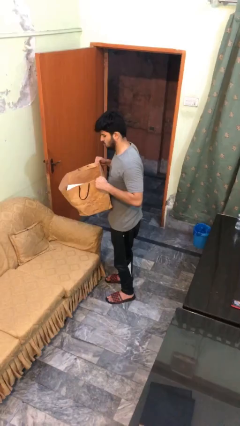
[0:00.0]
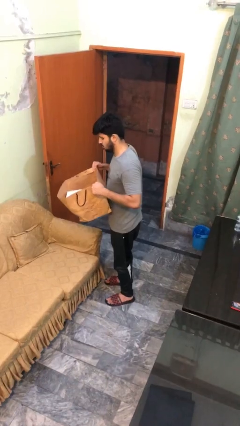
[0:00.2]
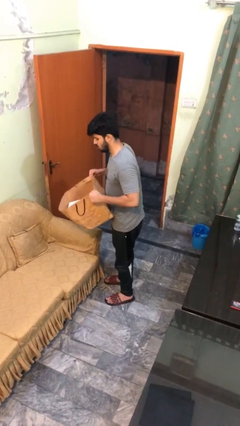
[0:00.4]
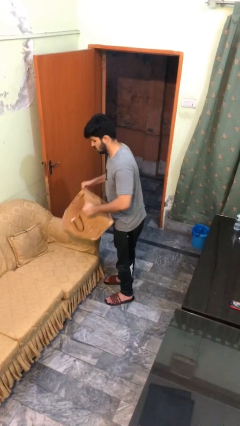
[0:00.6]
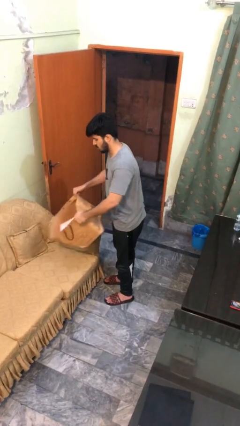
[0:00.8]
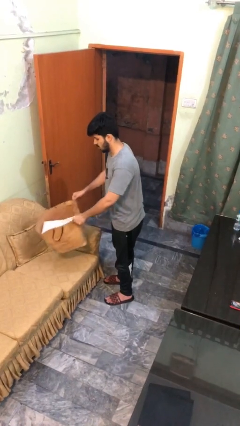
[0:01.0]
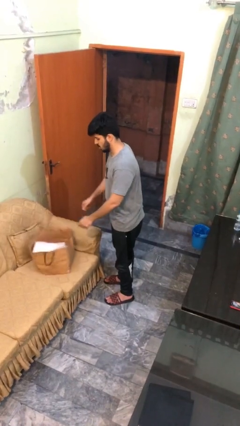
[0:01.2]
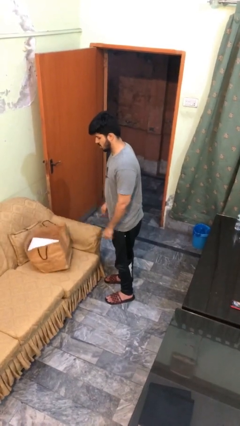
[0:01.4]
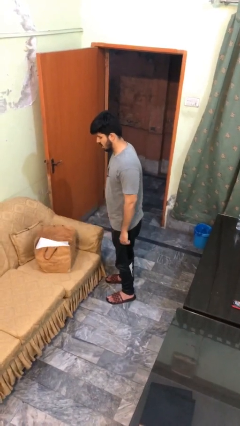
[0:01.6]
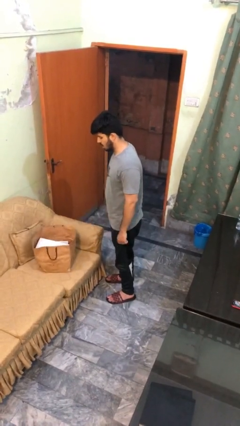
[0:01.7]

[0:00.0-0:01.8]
person puts down object on couch

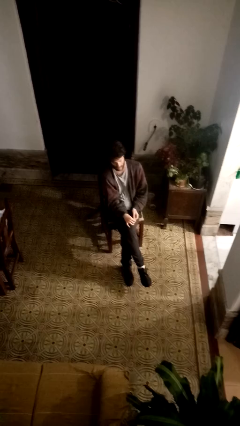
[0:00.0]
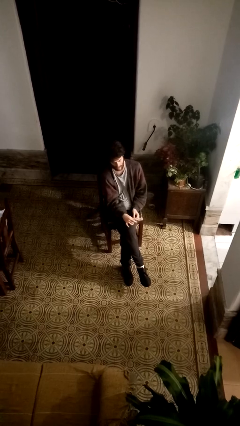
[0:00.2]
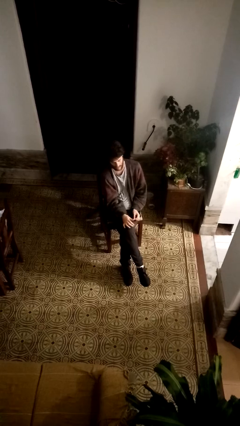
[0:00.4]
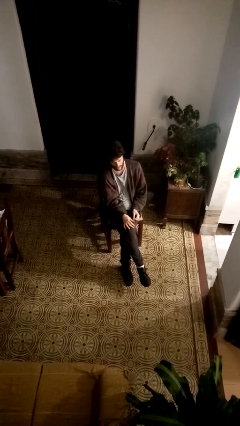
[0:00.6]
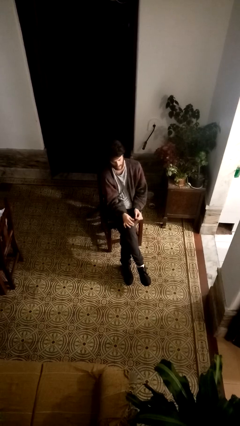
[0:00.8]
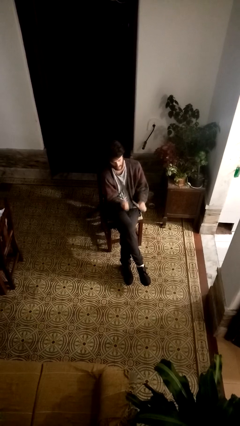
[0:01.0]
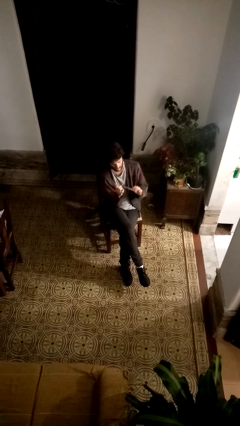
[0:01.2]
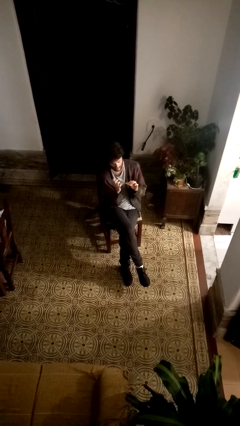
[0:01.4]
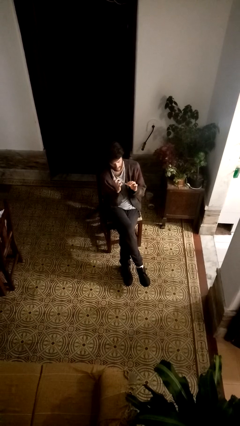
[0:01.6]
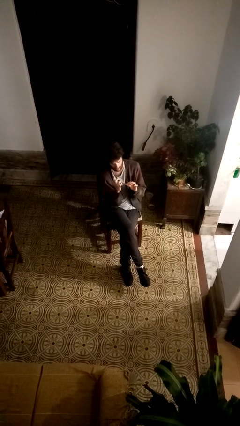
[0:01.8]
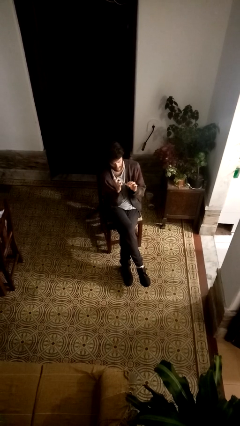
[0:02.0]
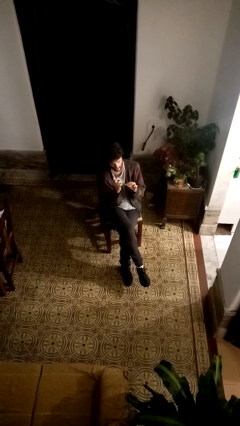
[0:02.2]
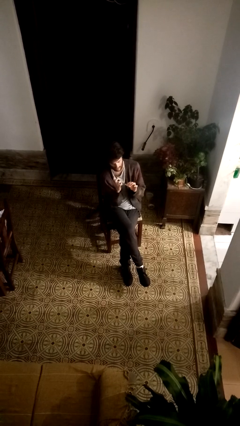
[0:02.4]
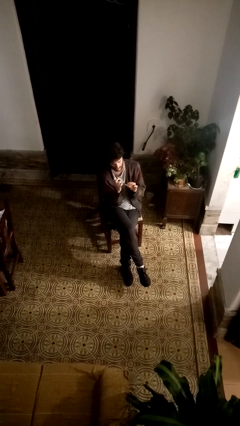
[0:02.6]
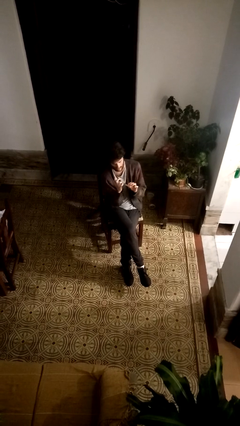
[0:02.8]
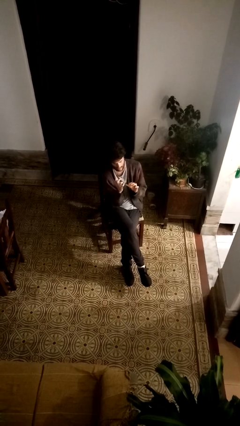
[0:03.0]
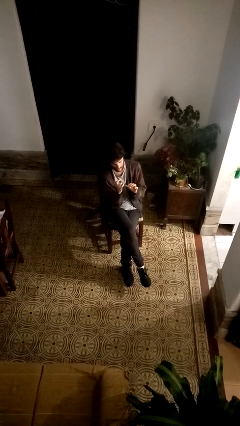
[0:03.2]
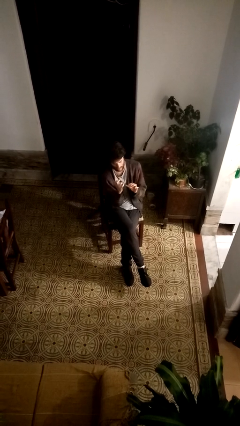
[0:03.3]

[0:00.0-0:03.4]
person files fingernails

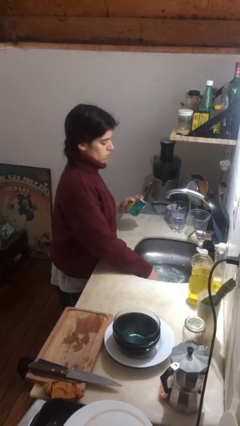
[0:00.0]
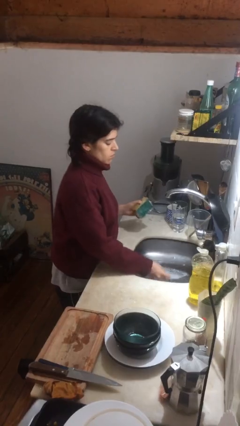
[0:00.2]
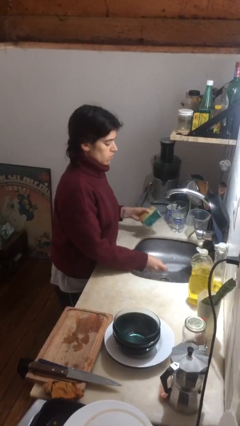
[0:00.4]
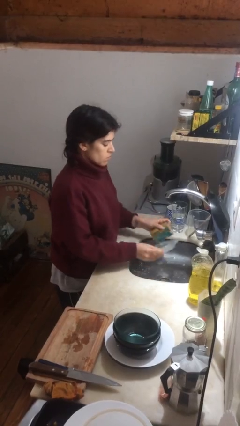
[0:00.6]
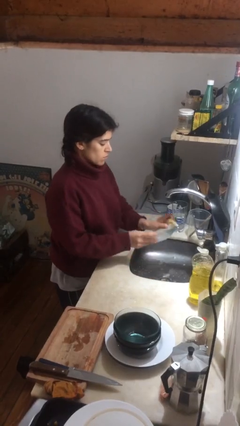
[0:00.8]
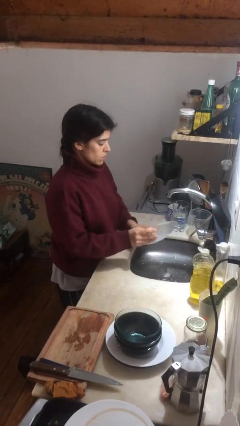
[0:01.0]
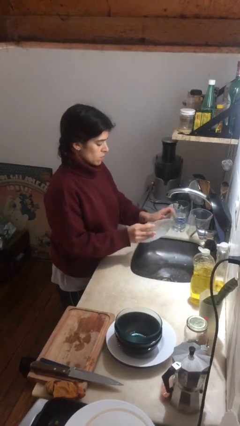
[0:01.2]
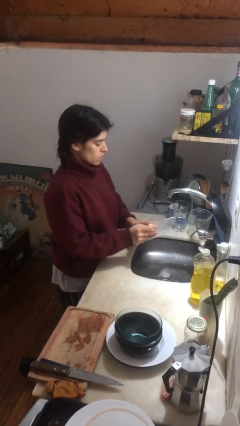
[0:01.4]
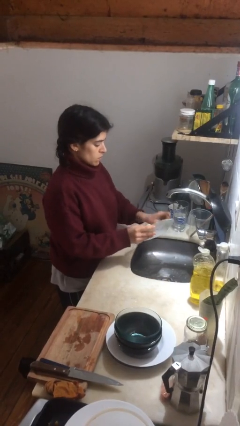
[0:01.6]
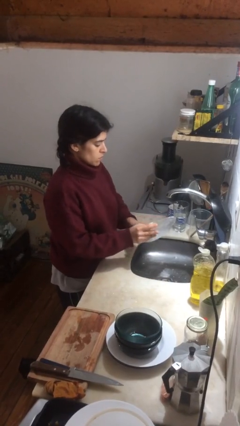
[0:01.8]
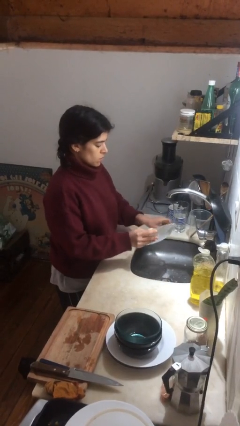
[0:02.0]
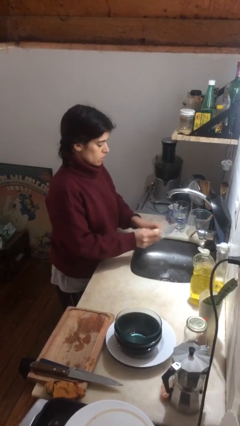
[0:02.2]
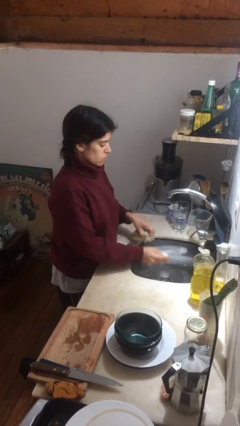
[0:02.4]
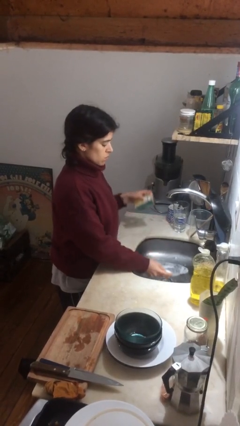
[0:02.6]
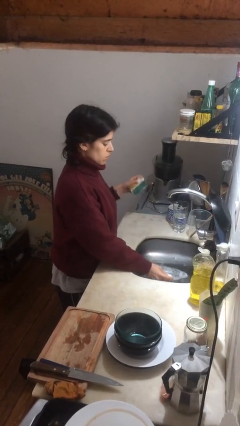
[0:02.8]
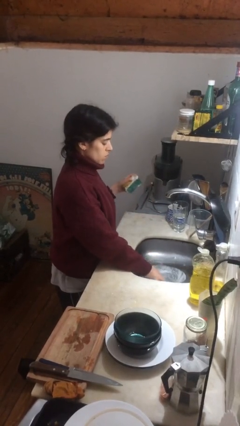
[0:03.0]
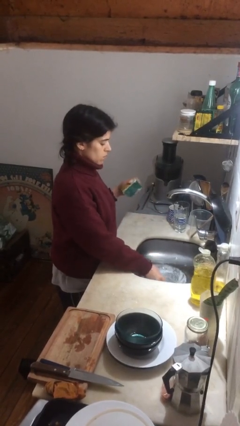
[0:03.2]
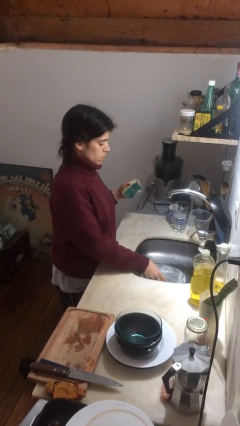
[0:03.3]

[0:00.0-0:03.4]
person washes dish

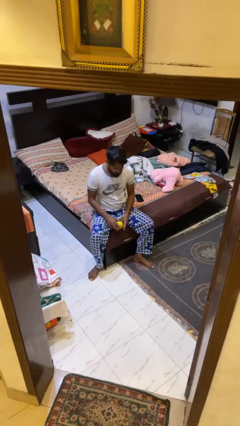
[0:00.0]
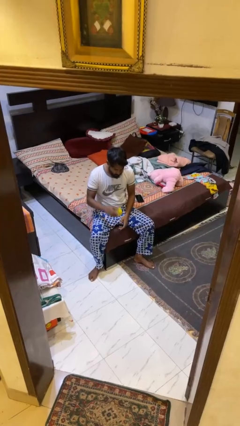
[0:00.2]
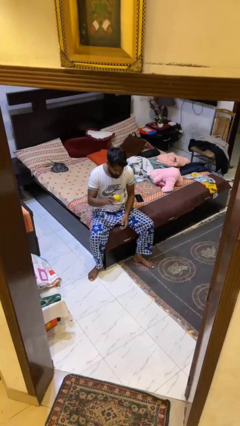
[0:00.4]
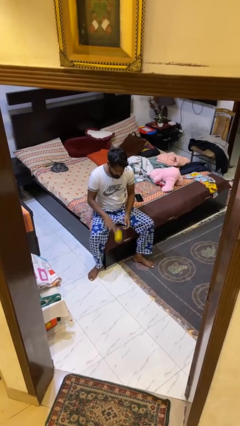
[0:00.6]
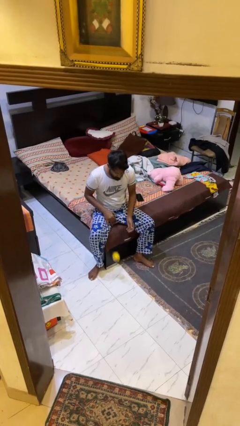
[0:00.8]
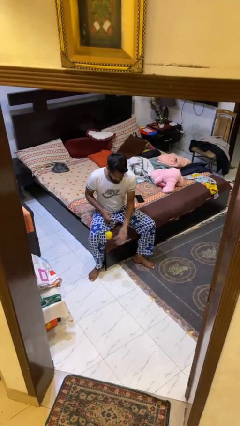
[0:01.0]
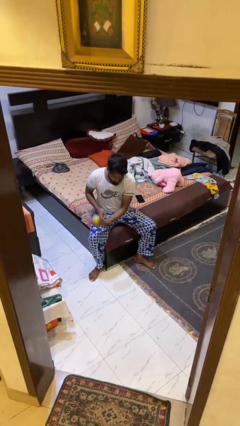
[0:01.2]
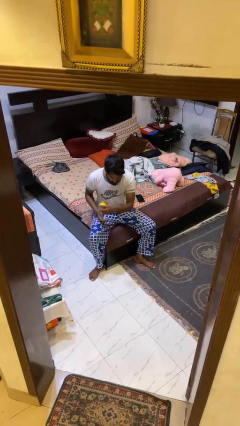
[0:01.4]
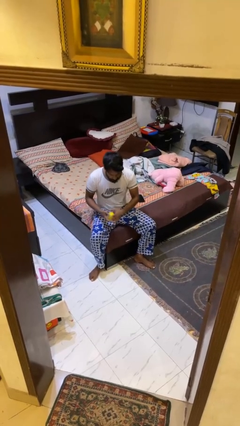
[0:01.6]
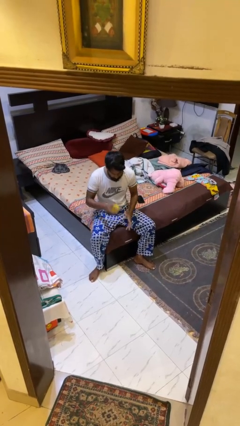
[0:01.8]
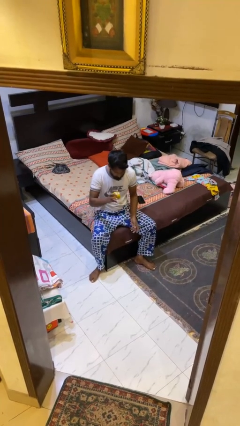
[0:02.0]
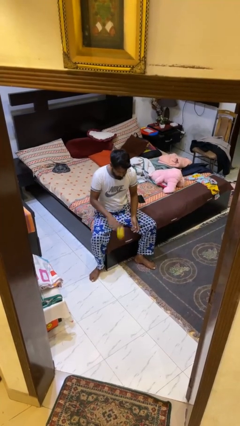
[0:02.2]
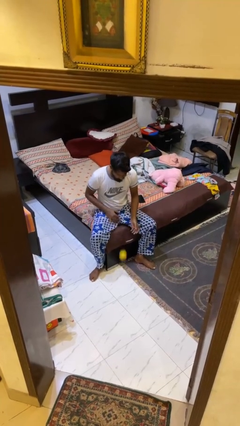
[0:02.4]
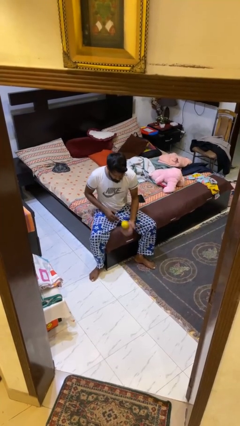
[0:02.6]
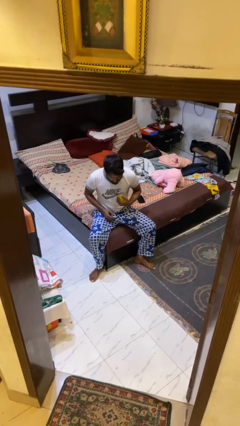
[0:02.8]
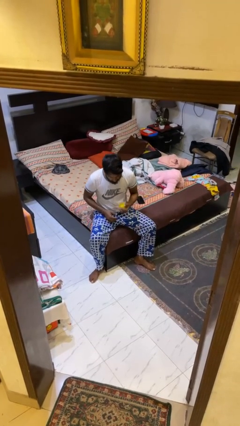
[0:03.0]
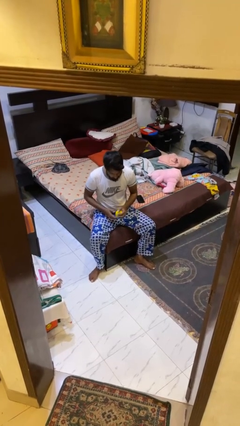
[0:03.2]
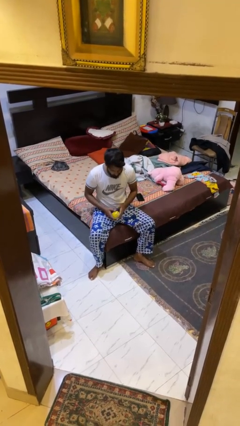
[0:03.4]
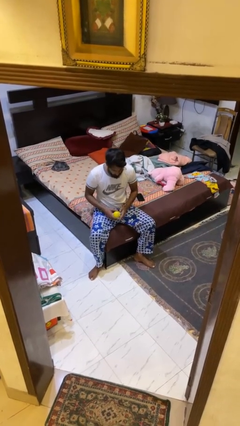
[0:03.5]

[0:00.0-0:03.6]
person bounces ball on floor

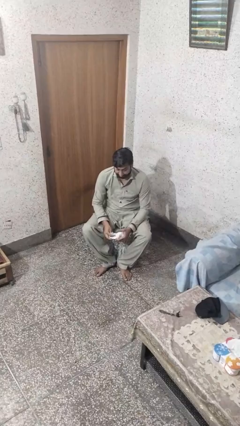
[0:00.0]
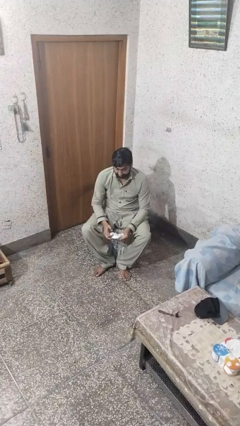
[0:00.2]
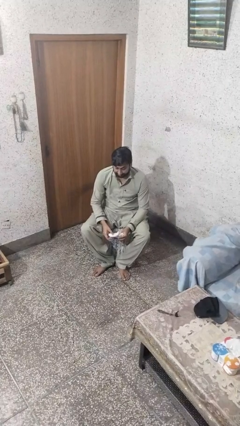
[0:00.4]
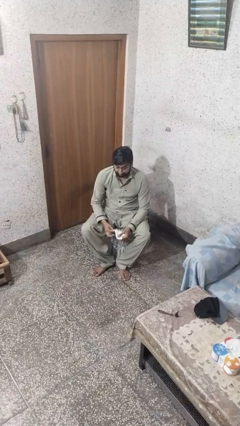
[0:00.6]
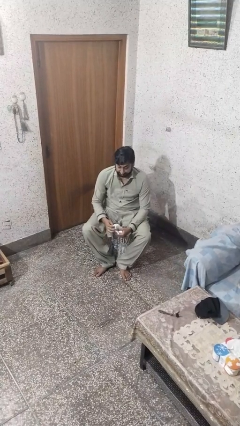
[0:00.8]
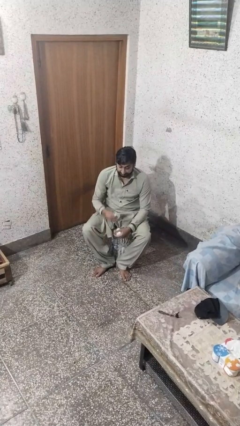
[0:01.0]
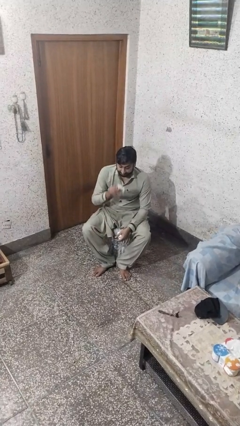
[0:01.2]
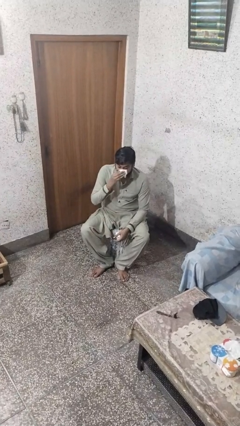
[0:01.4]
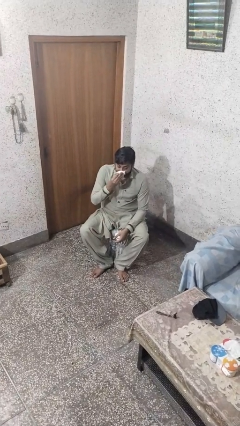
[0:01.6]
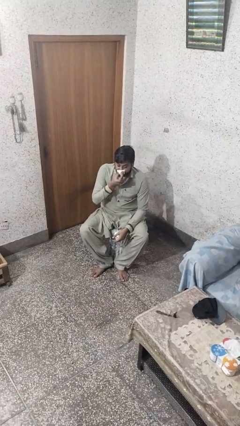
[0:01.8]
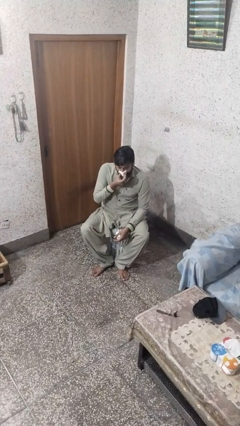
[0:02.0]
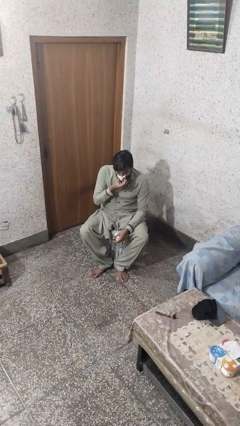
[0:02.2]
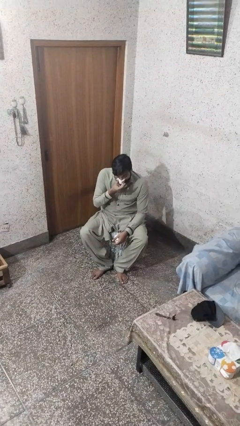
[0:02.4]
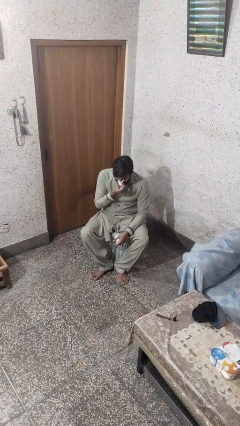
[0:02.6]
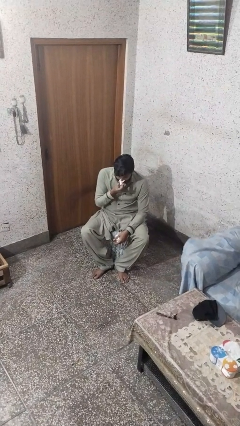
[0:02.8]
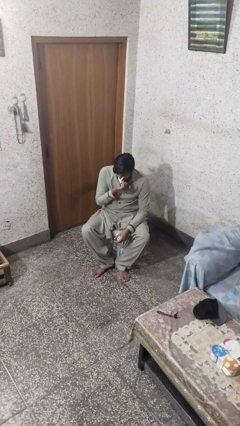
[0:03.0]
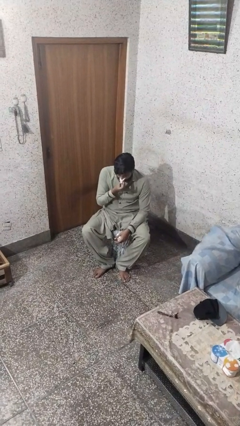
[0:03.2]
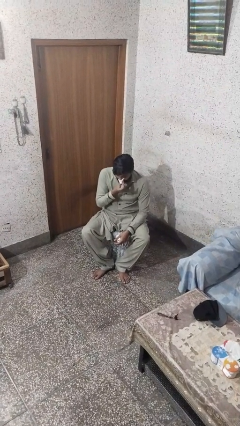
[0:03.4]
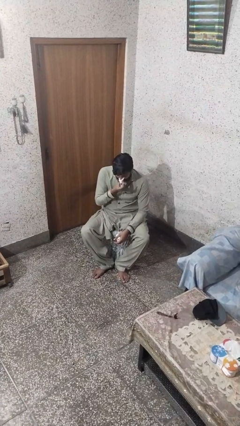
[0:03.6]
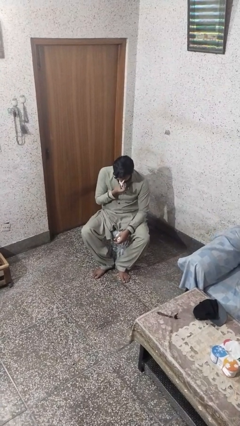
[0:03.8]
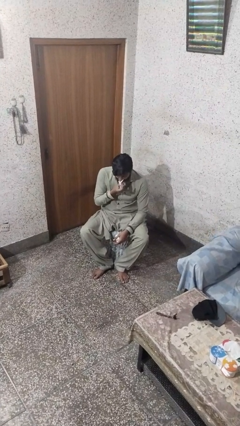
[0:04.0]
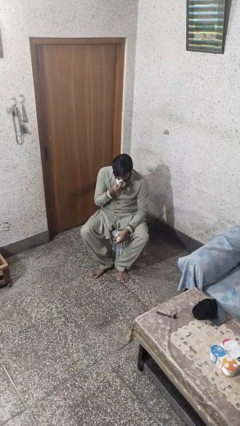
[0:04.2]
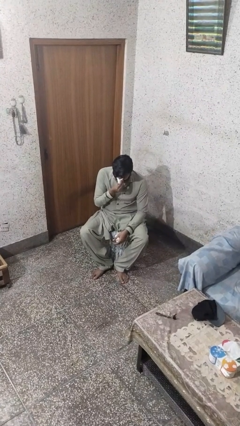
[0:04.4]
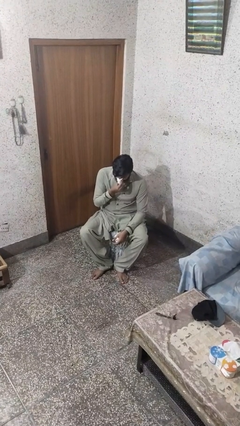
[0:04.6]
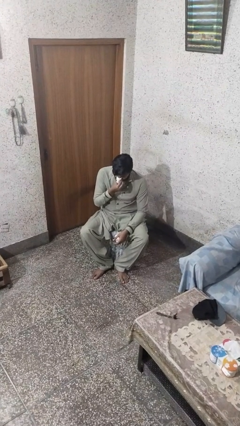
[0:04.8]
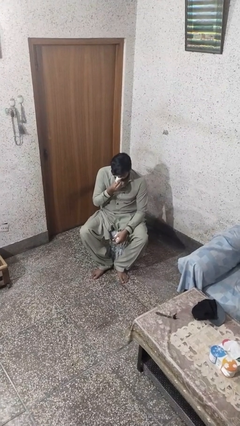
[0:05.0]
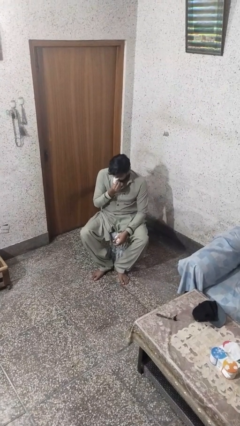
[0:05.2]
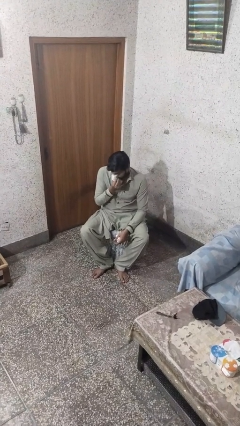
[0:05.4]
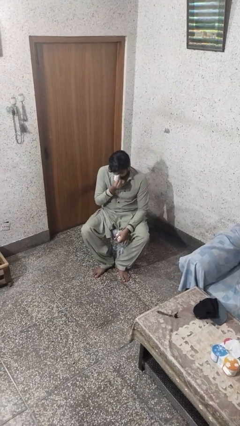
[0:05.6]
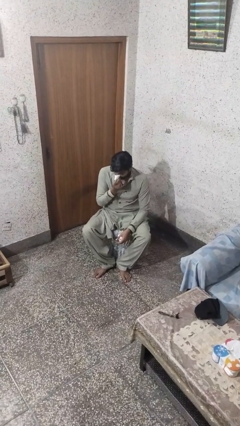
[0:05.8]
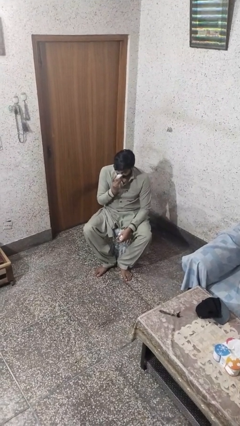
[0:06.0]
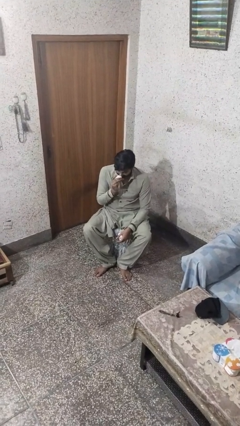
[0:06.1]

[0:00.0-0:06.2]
person blows nose
